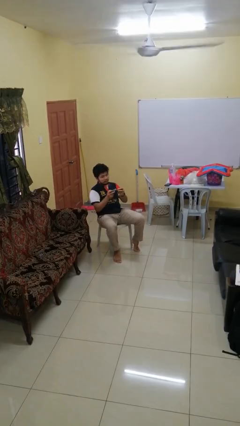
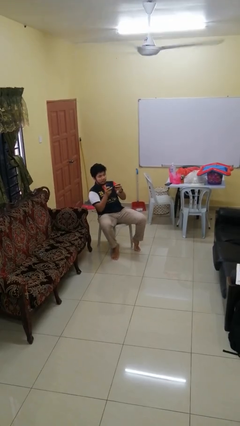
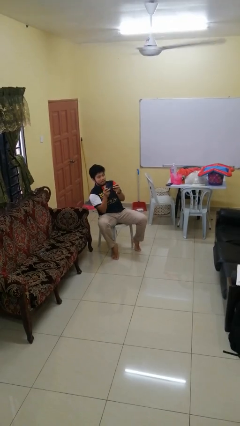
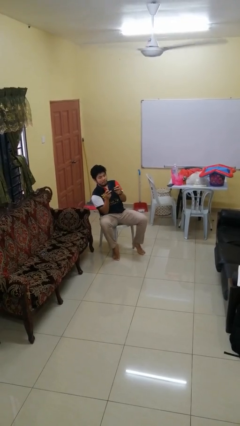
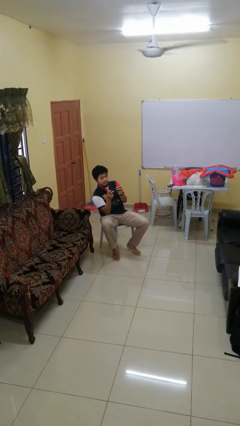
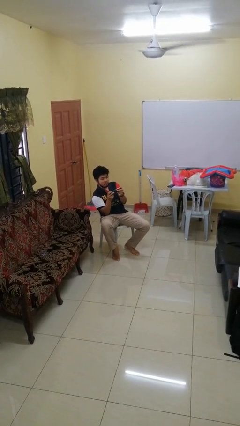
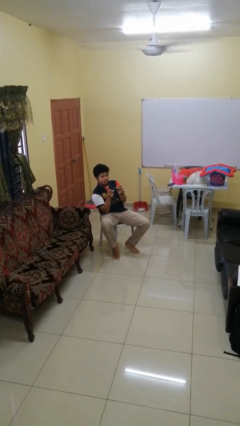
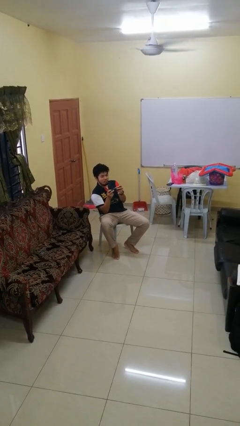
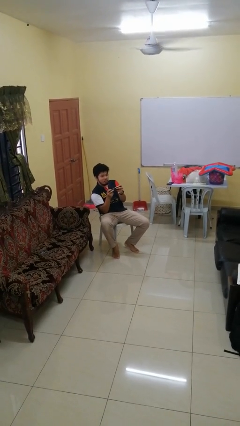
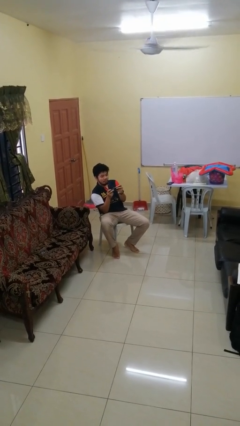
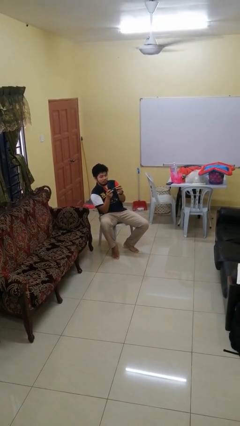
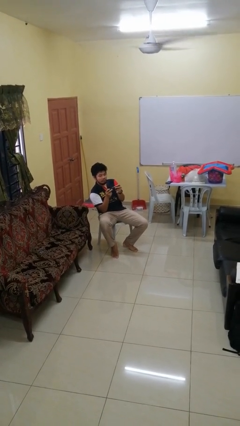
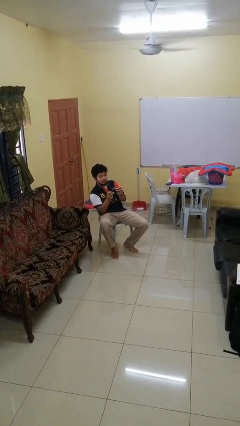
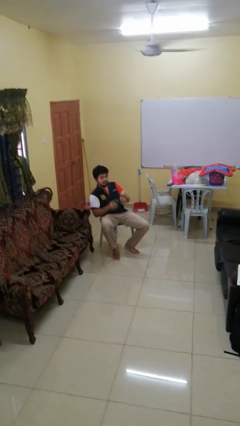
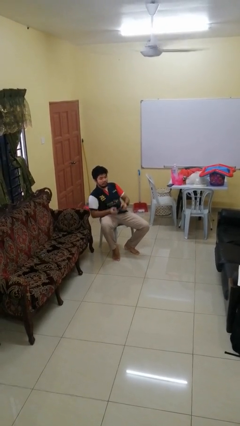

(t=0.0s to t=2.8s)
person interacts with handheld game

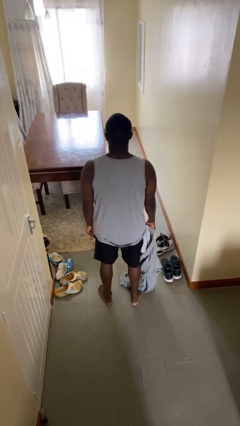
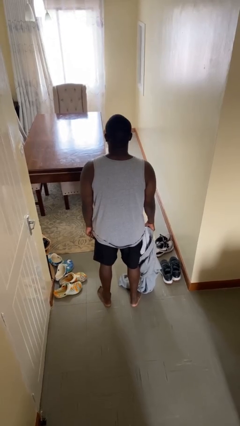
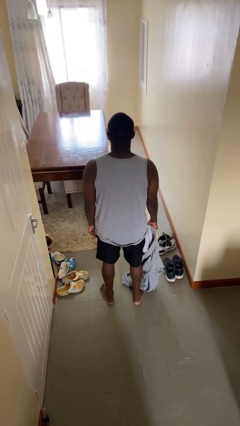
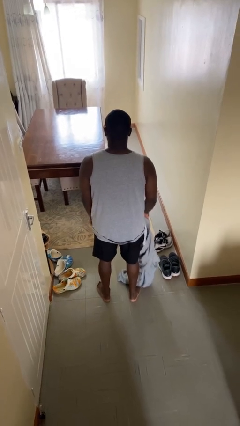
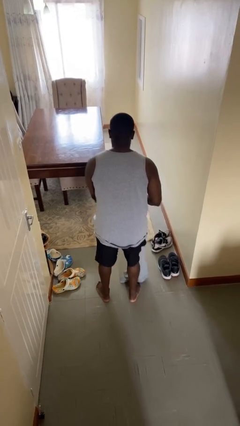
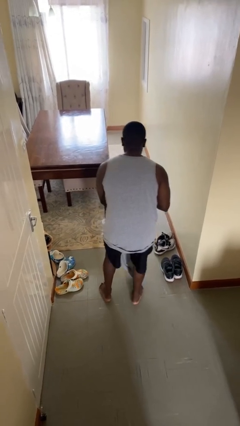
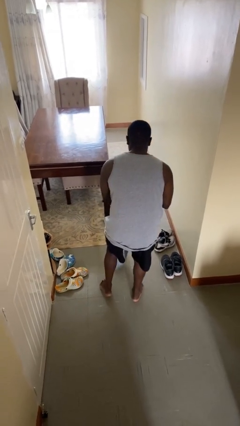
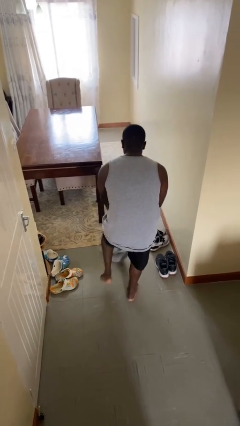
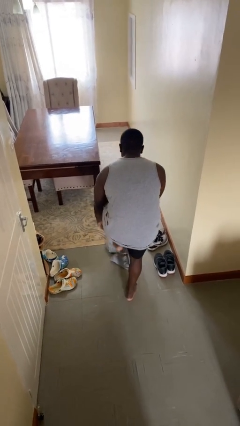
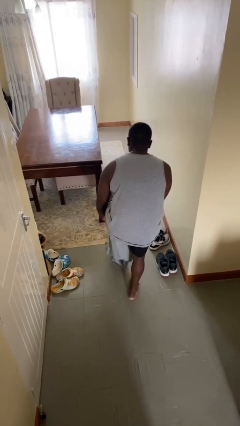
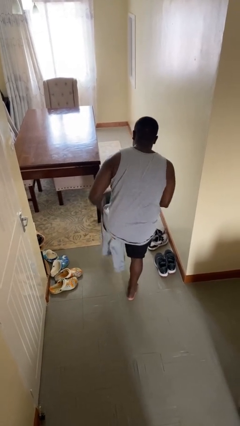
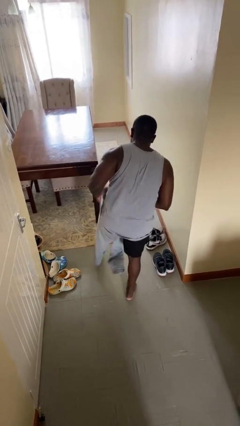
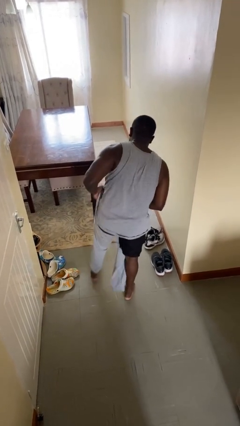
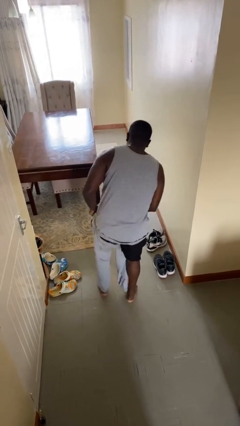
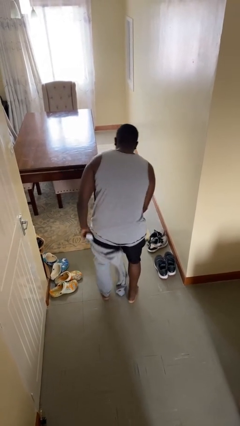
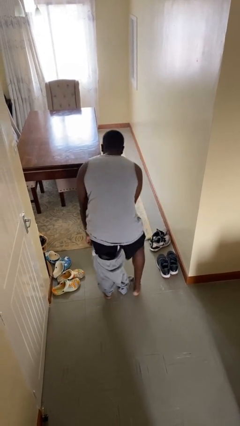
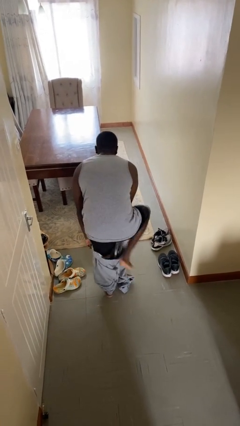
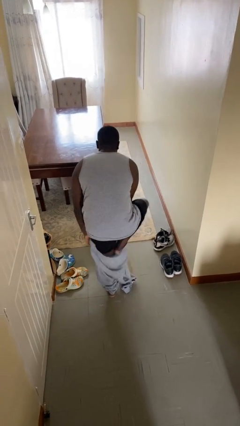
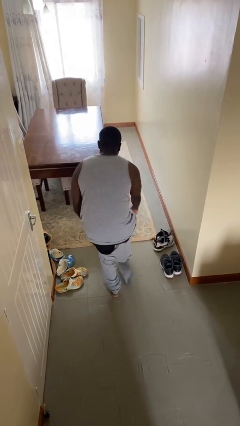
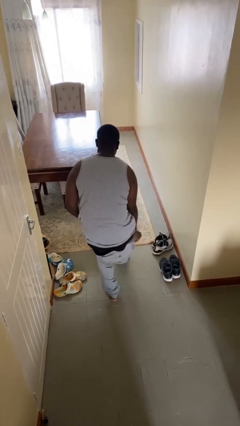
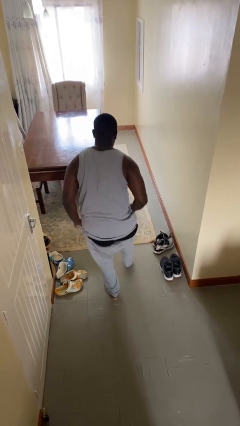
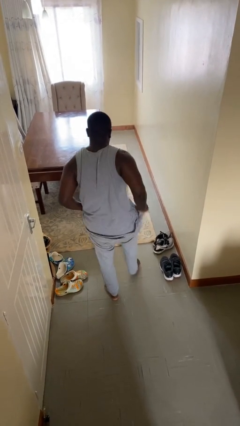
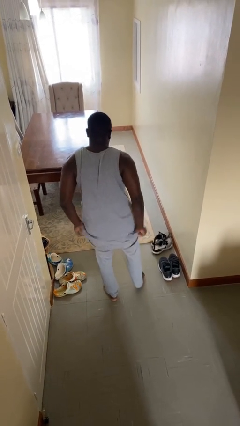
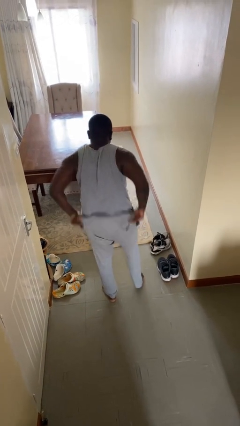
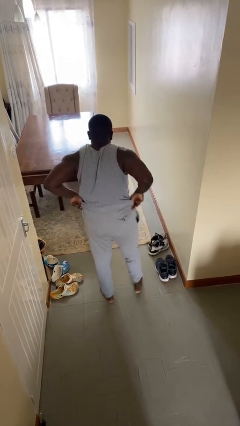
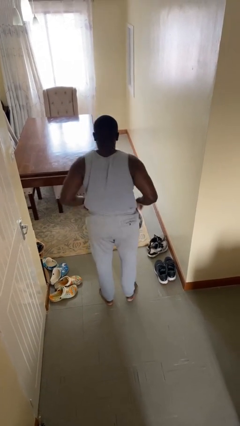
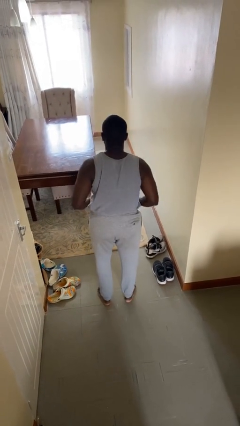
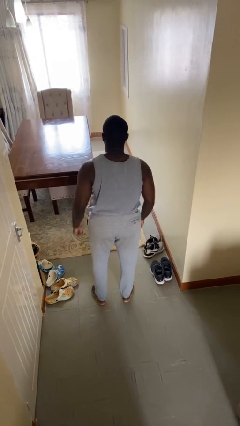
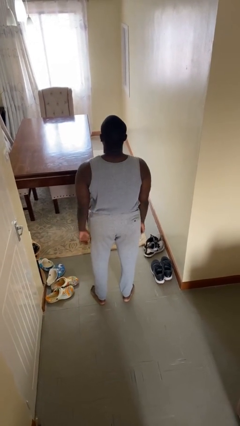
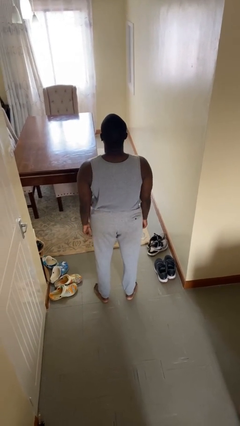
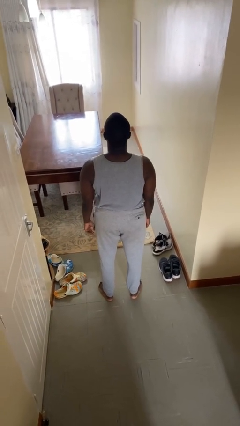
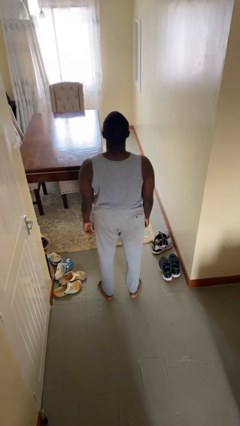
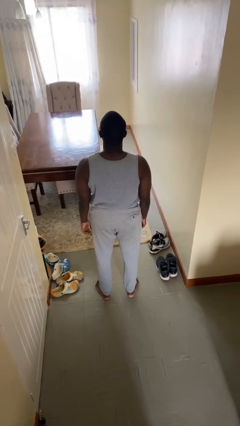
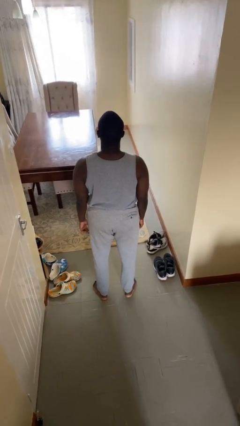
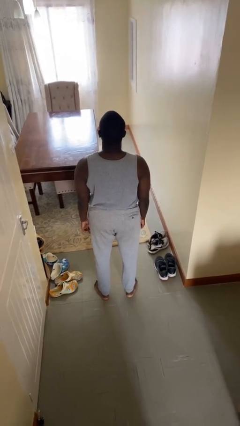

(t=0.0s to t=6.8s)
person puts on pants

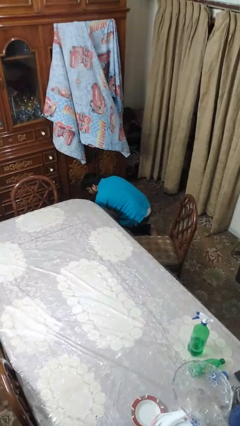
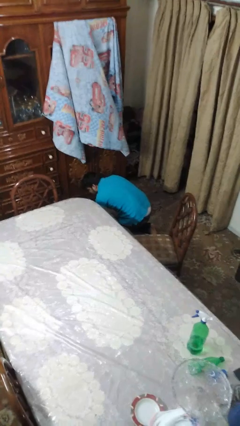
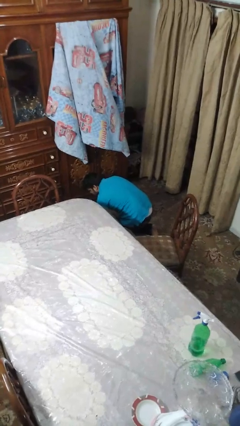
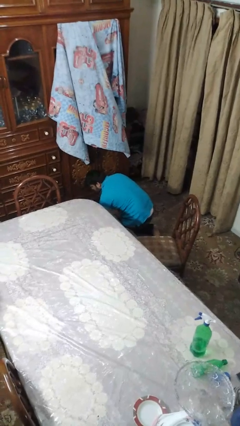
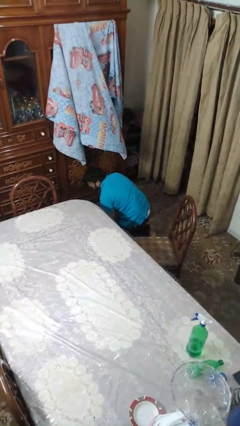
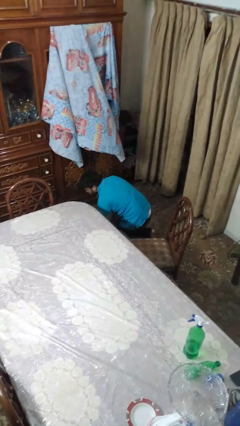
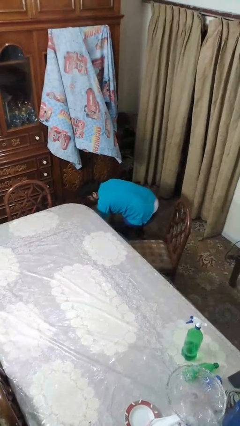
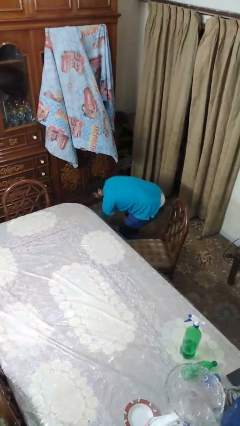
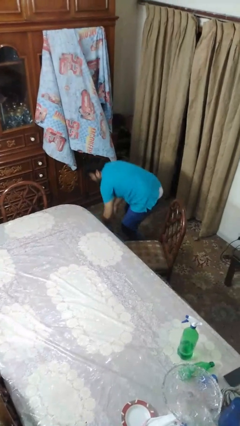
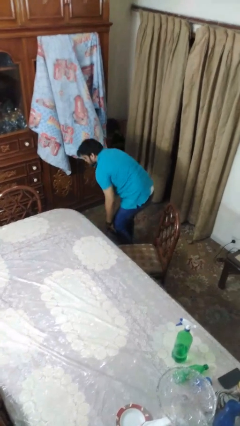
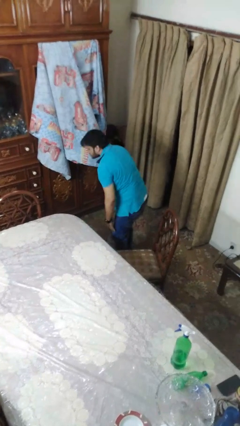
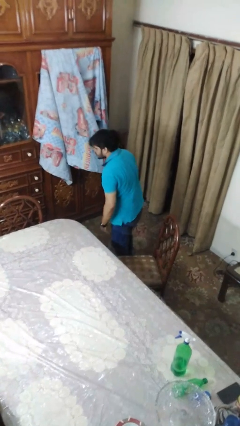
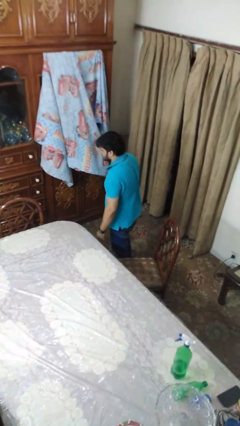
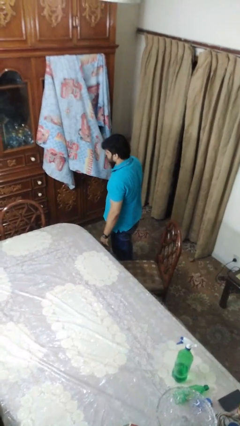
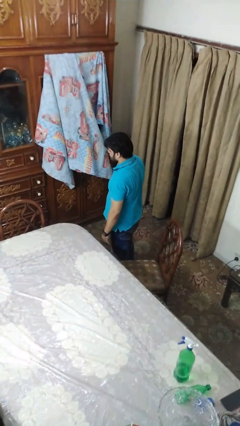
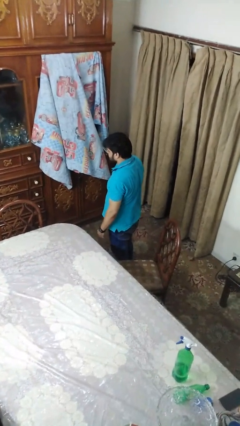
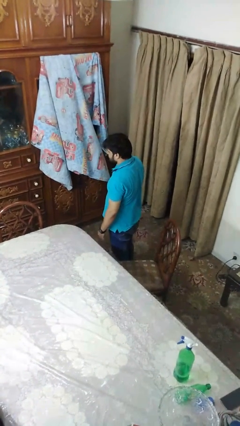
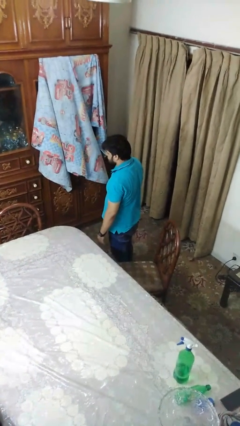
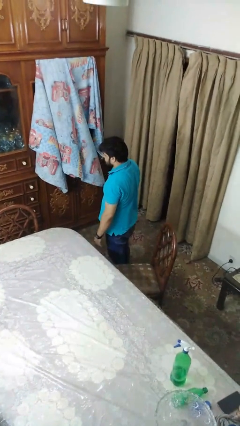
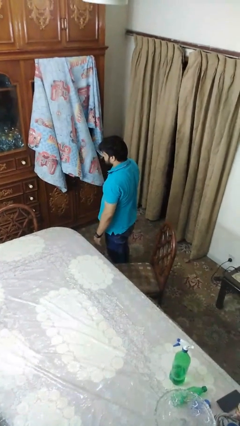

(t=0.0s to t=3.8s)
person stands up from floor

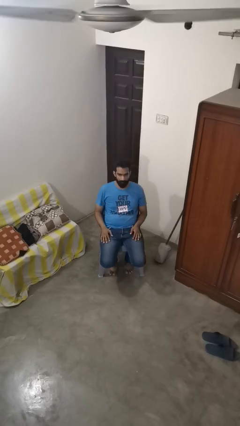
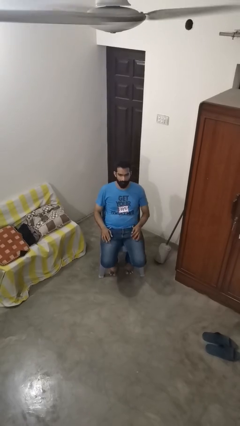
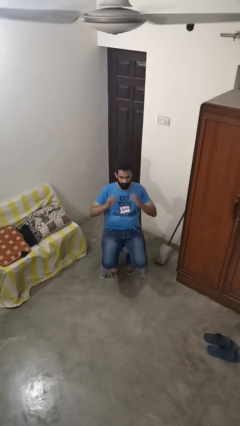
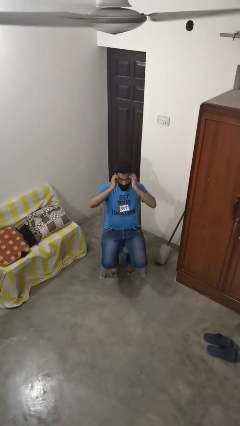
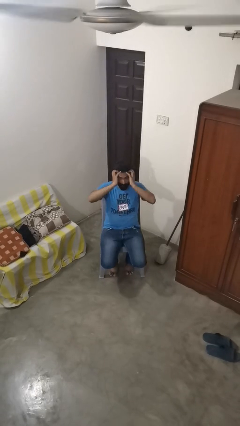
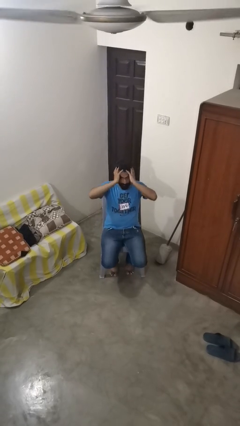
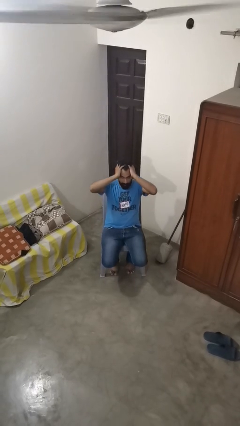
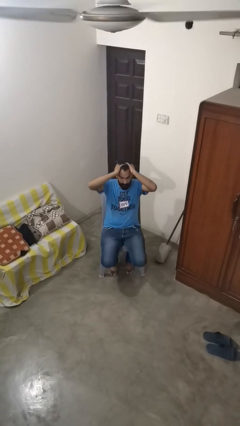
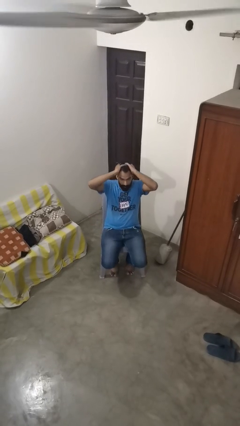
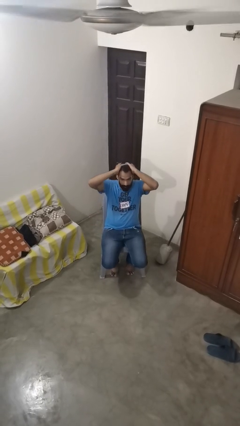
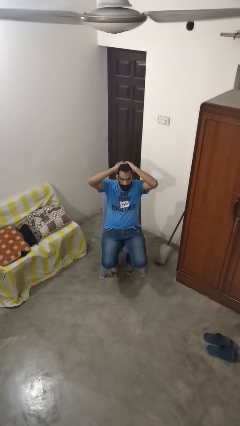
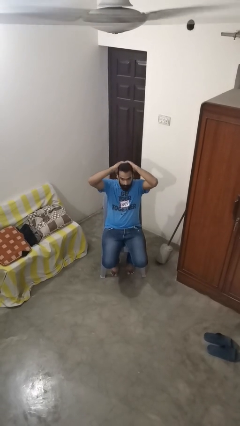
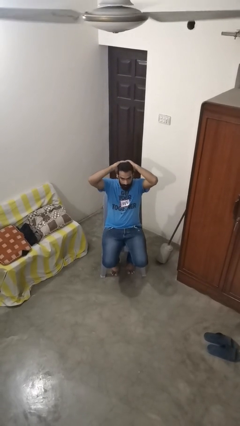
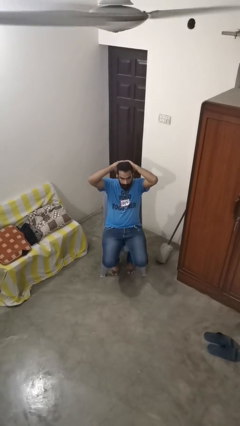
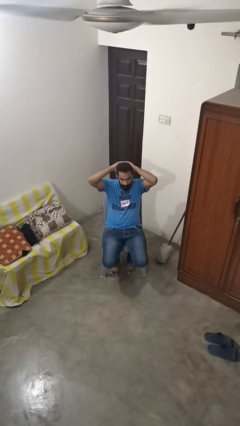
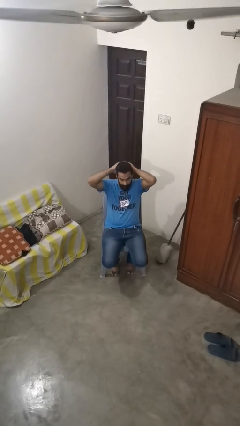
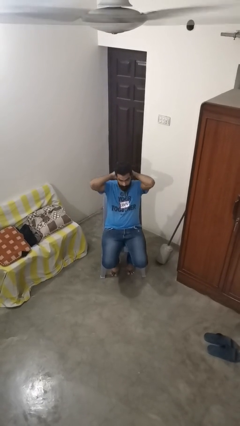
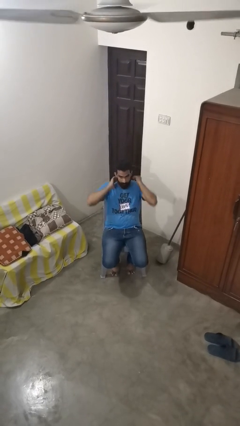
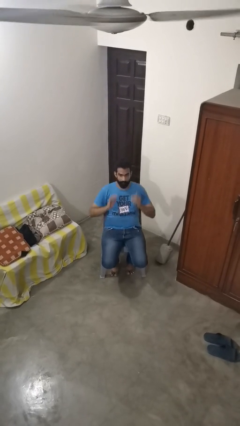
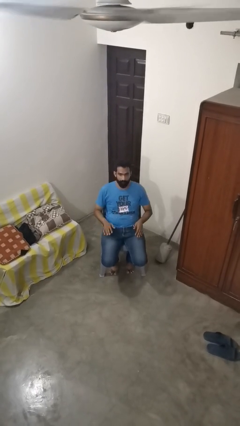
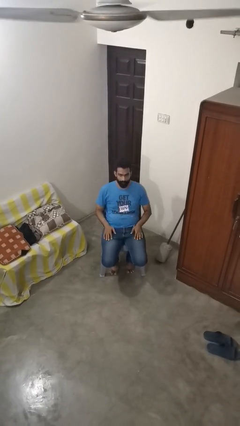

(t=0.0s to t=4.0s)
person strokes hair

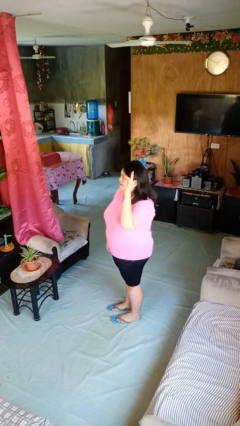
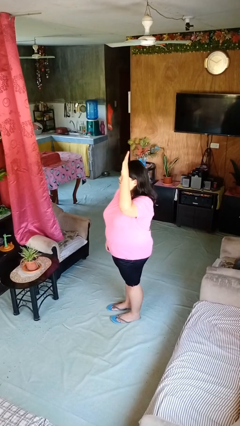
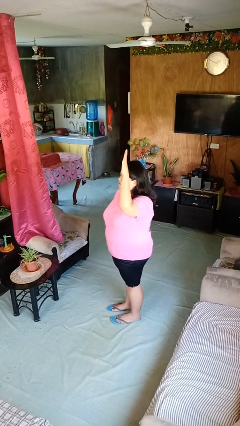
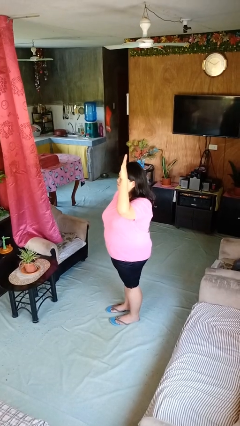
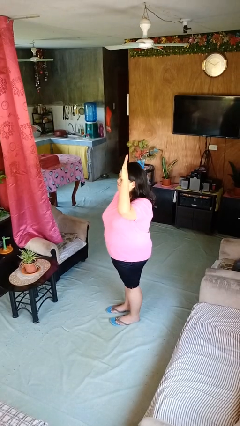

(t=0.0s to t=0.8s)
person gestures raise hand
